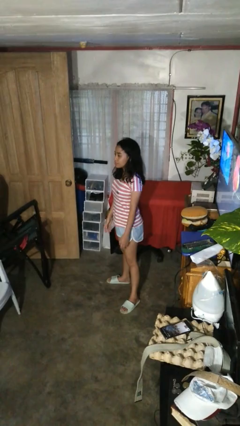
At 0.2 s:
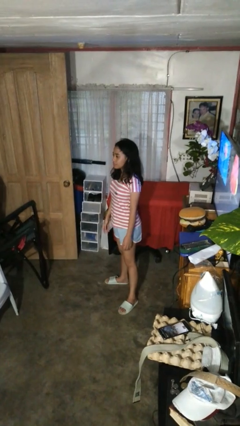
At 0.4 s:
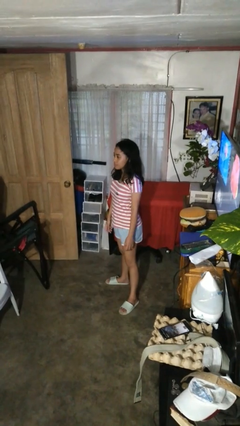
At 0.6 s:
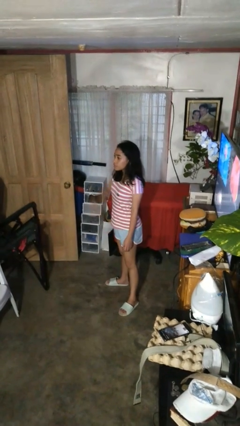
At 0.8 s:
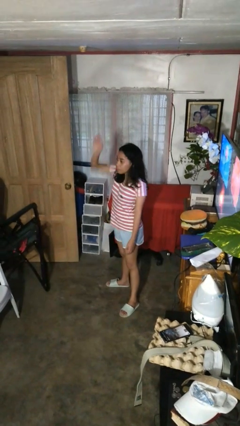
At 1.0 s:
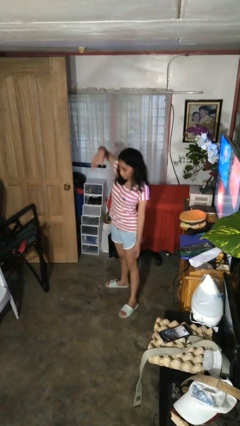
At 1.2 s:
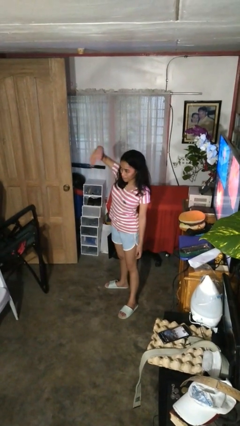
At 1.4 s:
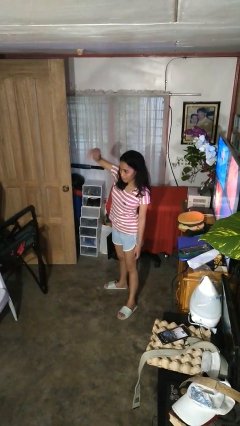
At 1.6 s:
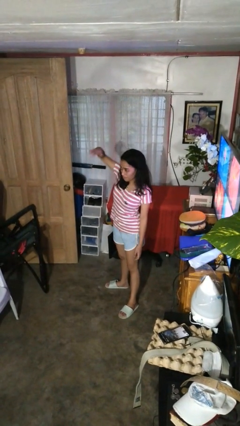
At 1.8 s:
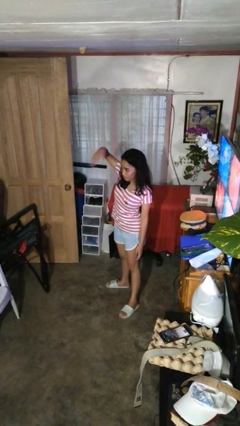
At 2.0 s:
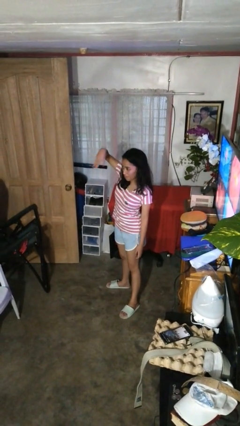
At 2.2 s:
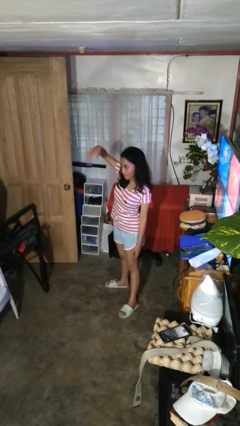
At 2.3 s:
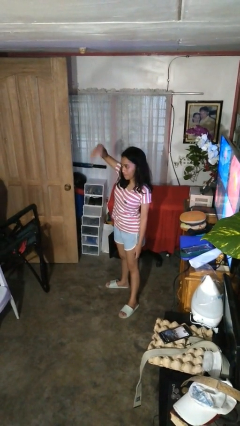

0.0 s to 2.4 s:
person gestures come here

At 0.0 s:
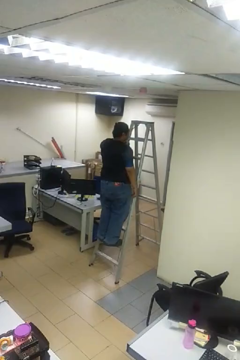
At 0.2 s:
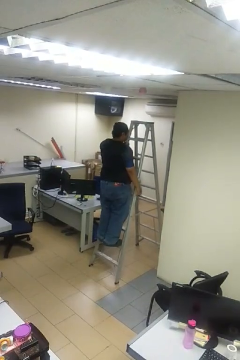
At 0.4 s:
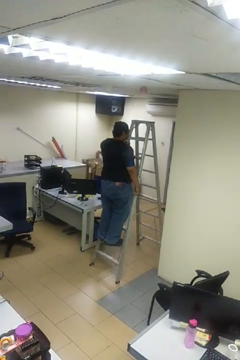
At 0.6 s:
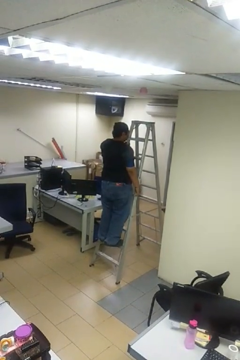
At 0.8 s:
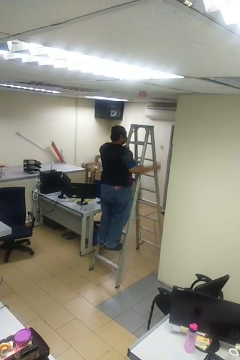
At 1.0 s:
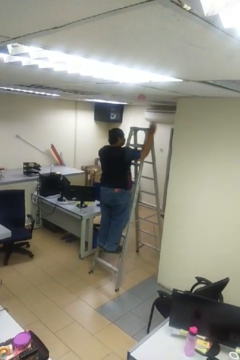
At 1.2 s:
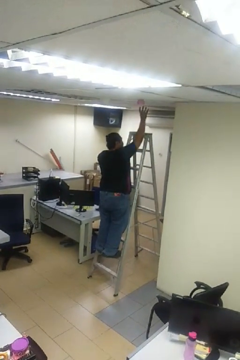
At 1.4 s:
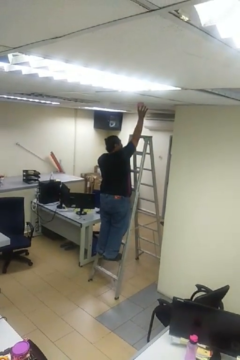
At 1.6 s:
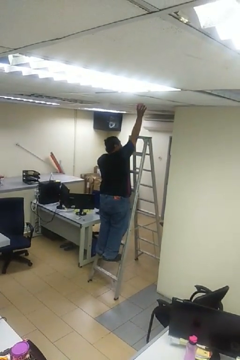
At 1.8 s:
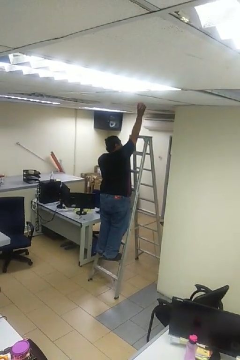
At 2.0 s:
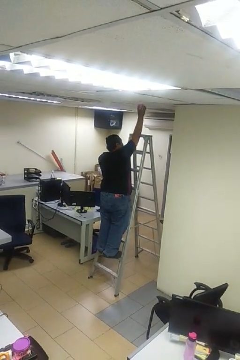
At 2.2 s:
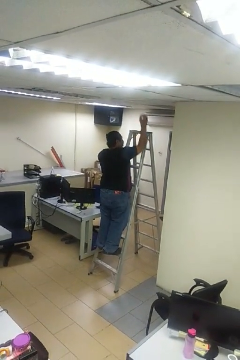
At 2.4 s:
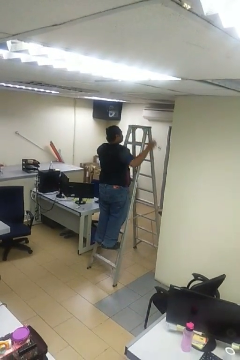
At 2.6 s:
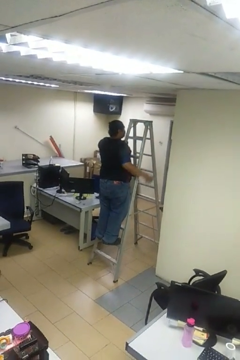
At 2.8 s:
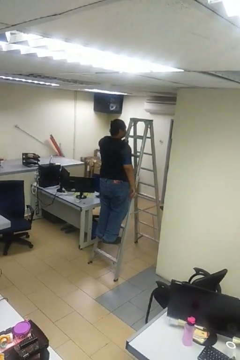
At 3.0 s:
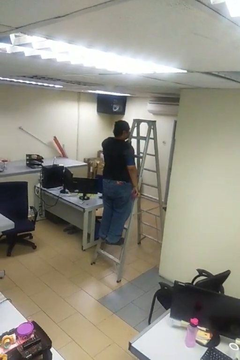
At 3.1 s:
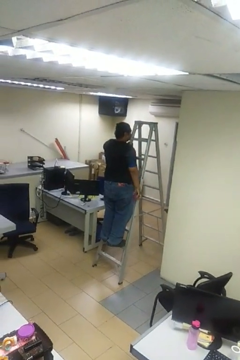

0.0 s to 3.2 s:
person takes down smoke detector

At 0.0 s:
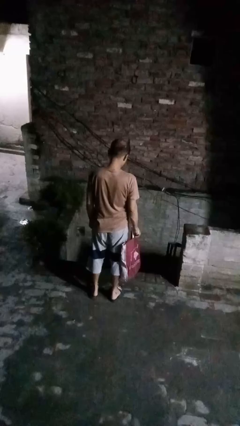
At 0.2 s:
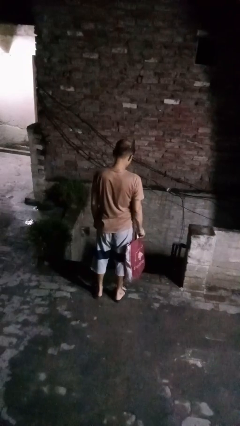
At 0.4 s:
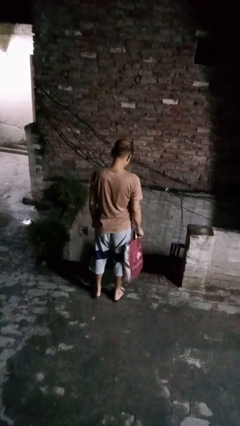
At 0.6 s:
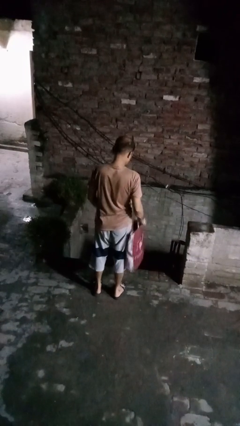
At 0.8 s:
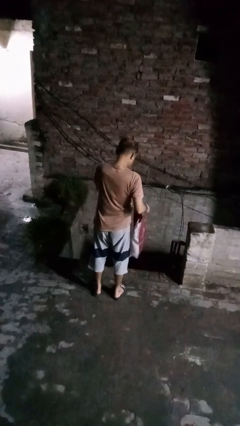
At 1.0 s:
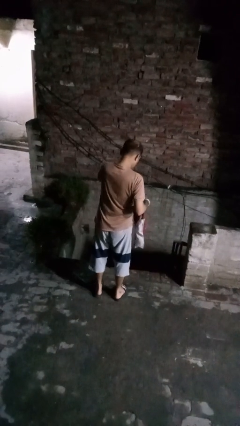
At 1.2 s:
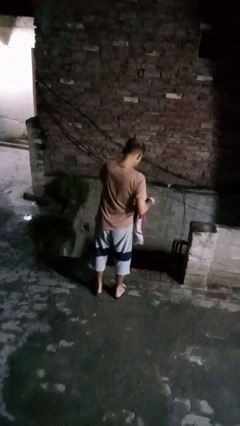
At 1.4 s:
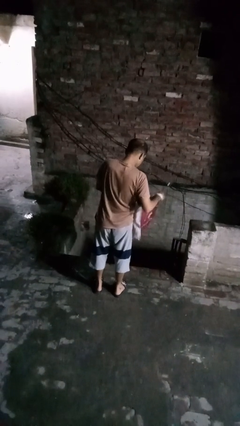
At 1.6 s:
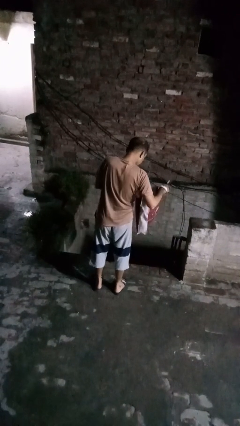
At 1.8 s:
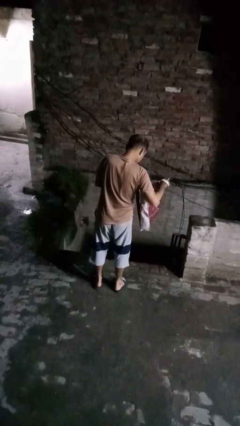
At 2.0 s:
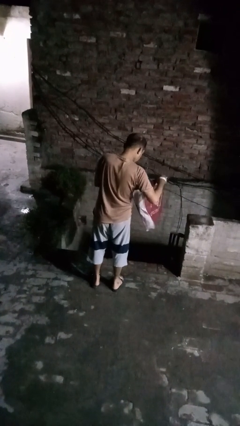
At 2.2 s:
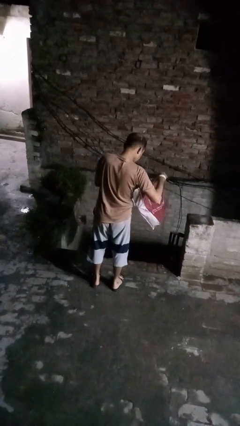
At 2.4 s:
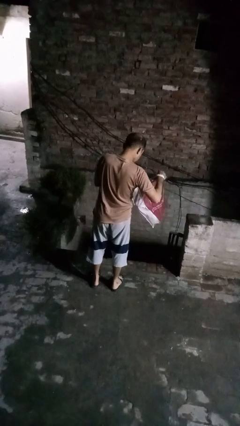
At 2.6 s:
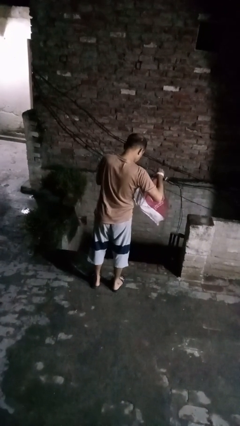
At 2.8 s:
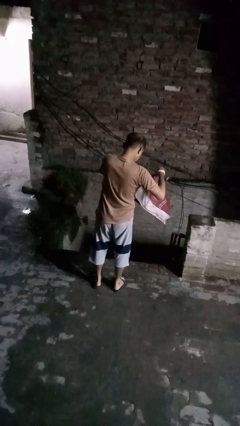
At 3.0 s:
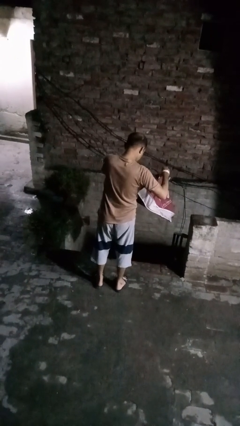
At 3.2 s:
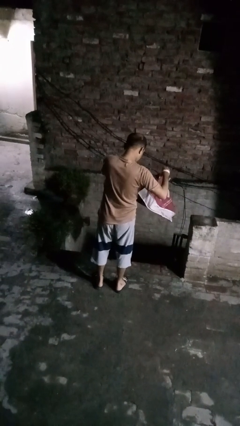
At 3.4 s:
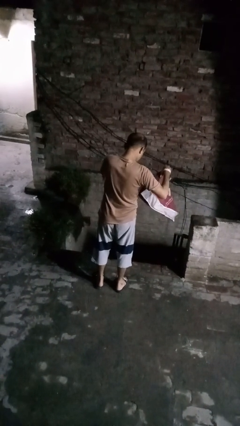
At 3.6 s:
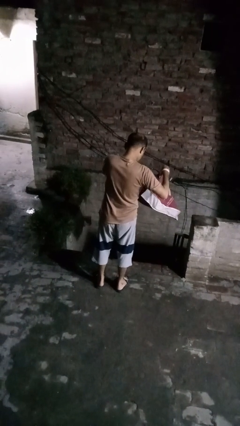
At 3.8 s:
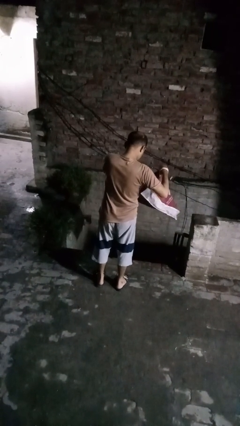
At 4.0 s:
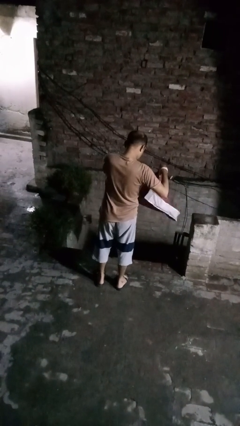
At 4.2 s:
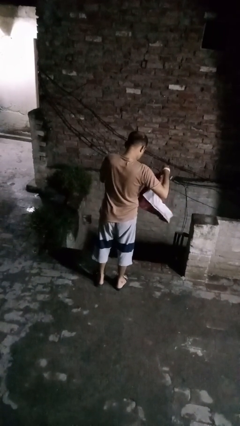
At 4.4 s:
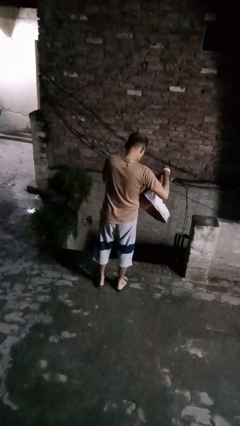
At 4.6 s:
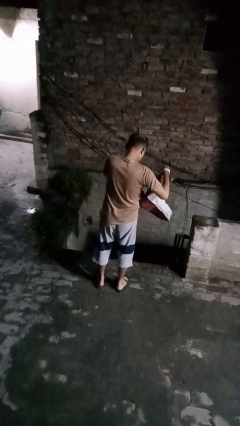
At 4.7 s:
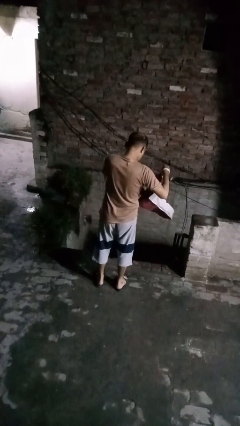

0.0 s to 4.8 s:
person searches in bag

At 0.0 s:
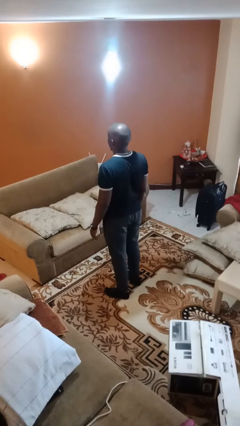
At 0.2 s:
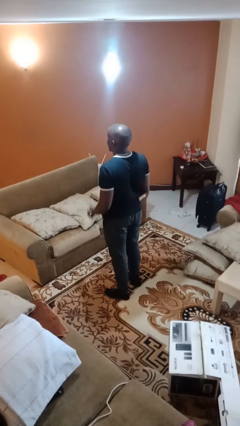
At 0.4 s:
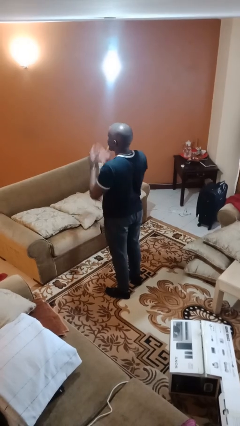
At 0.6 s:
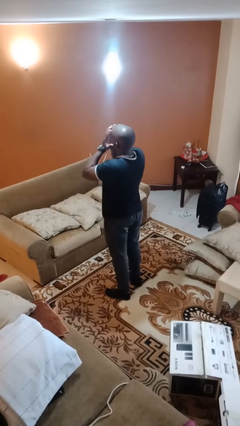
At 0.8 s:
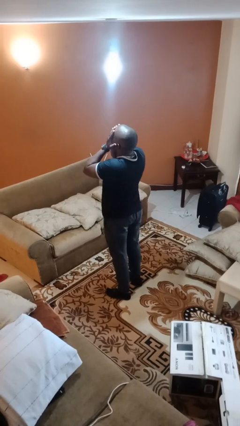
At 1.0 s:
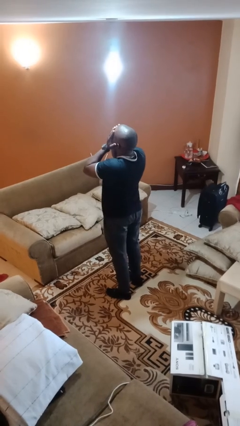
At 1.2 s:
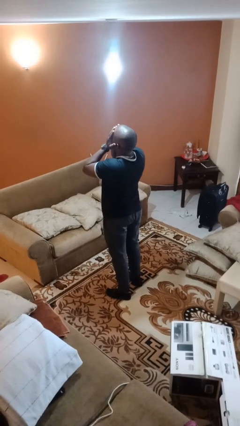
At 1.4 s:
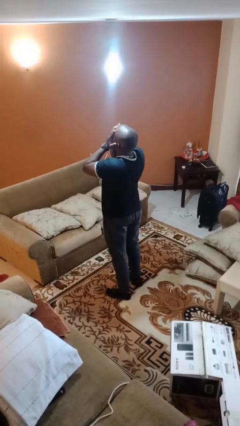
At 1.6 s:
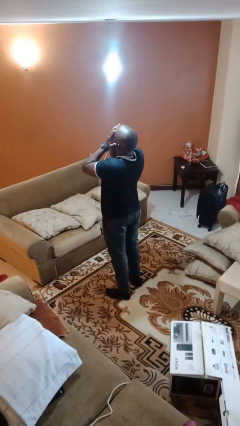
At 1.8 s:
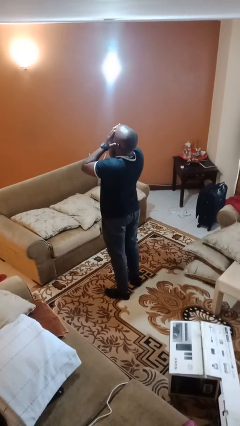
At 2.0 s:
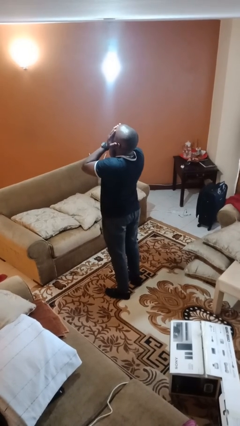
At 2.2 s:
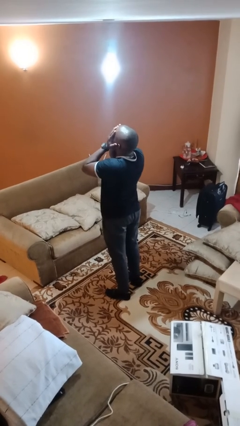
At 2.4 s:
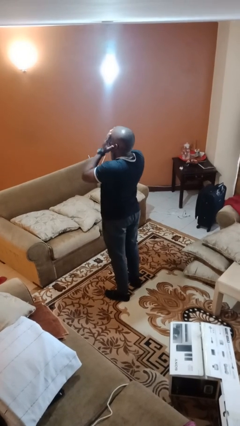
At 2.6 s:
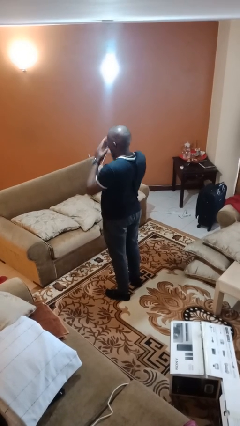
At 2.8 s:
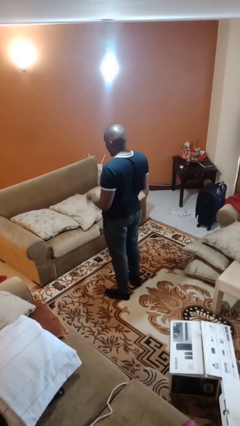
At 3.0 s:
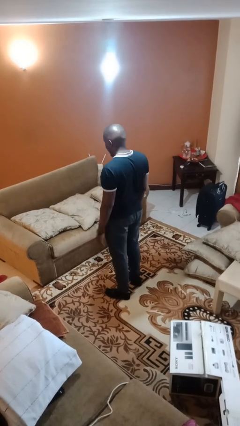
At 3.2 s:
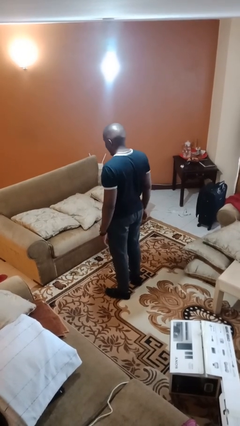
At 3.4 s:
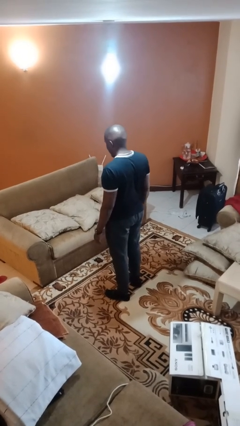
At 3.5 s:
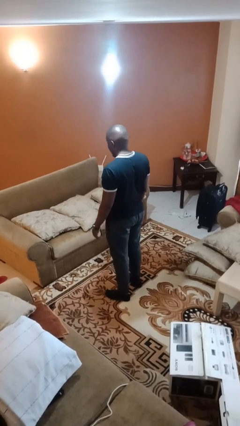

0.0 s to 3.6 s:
person covers face with hands

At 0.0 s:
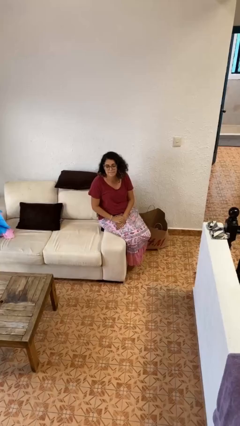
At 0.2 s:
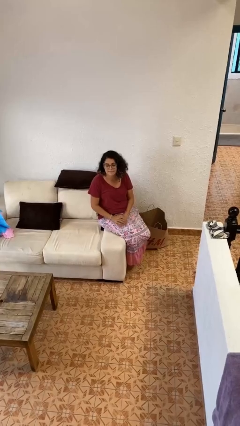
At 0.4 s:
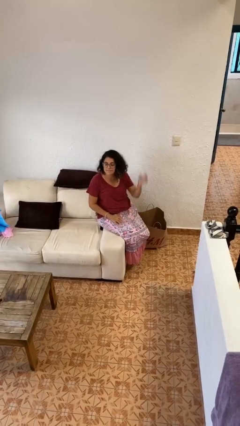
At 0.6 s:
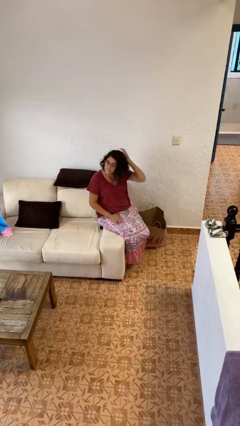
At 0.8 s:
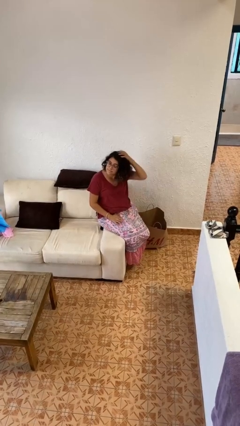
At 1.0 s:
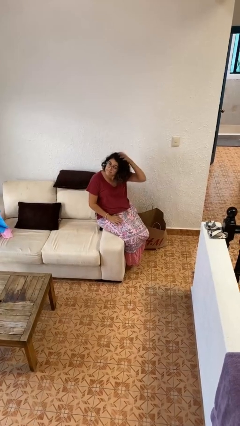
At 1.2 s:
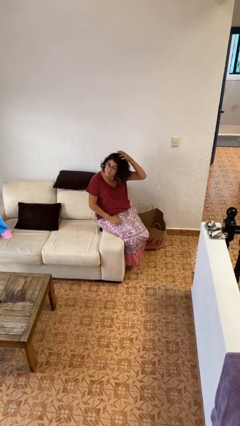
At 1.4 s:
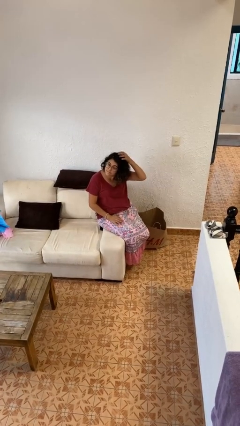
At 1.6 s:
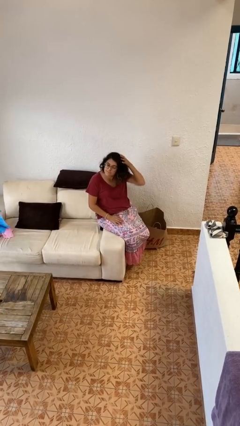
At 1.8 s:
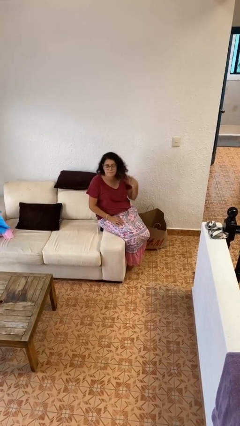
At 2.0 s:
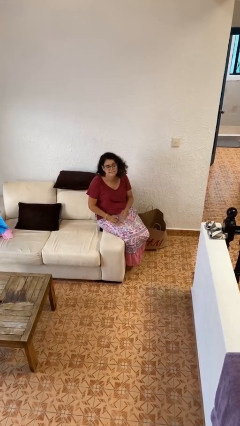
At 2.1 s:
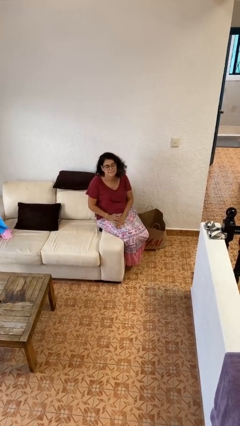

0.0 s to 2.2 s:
person pats head

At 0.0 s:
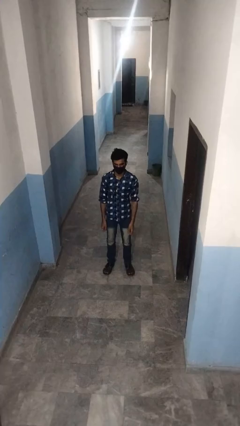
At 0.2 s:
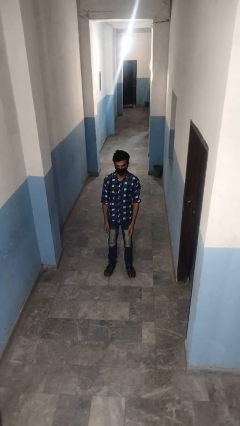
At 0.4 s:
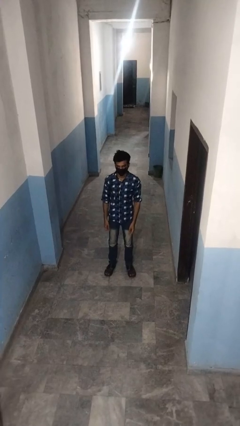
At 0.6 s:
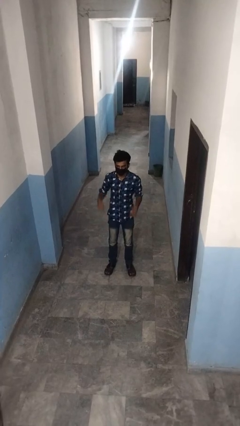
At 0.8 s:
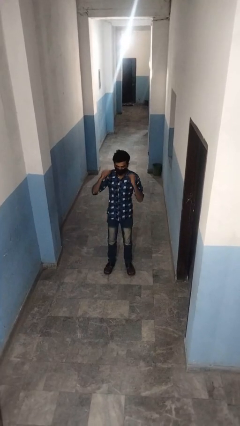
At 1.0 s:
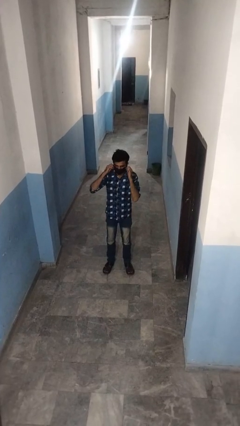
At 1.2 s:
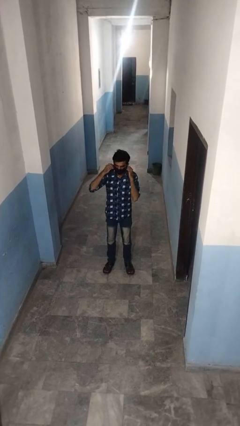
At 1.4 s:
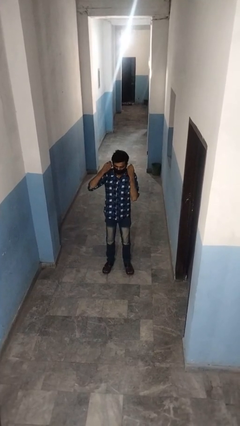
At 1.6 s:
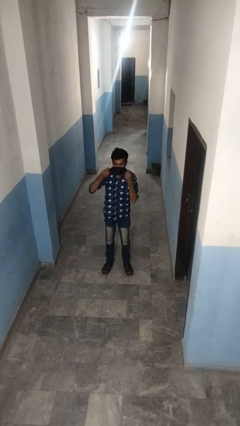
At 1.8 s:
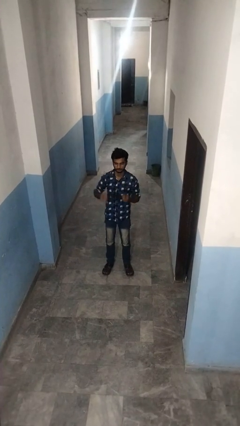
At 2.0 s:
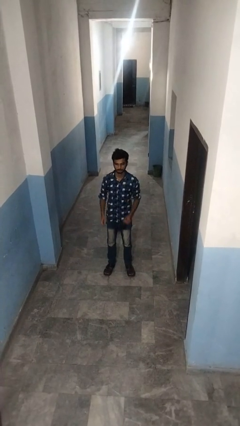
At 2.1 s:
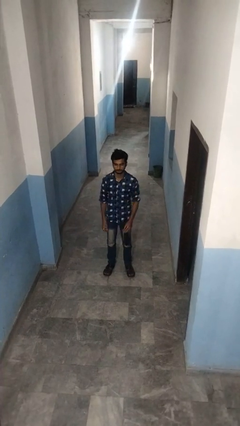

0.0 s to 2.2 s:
person takes off facemask
